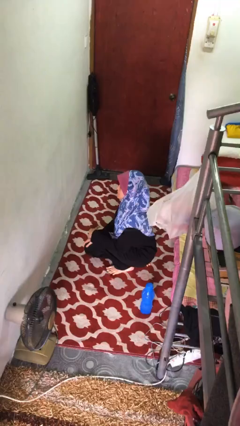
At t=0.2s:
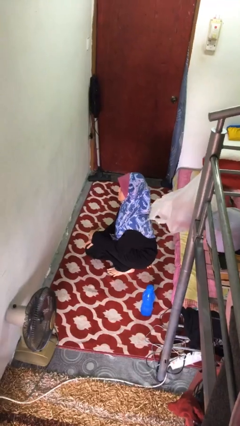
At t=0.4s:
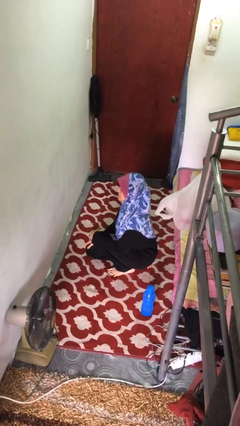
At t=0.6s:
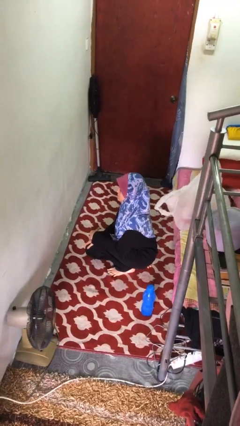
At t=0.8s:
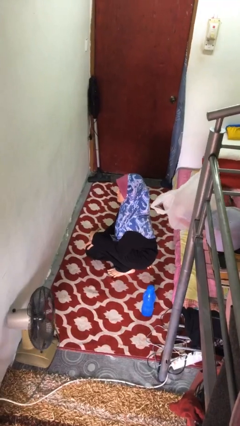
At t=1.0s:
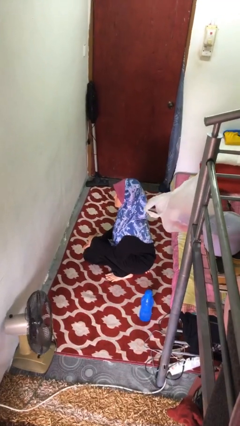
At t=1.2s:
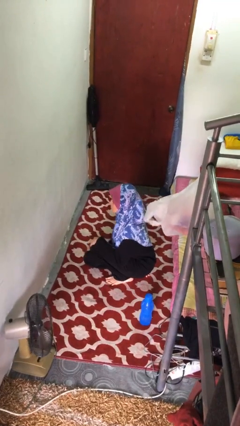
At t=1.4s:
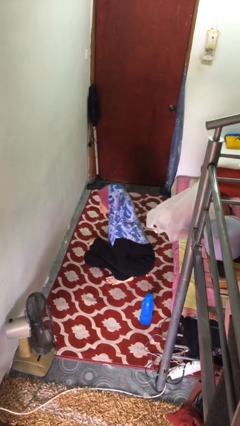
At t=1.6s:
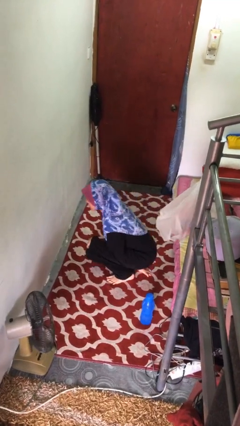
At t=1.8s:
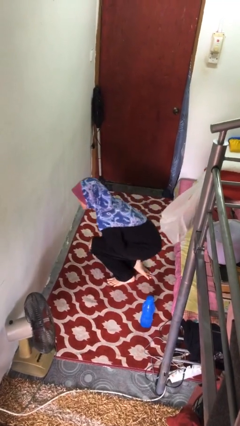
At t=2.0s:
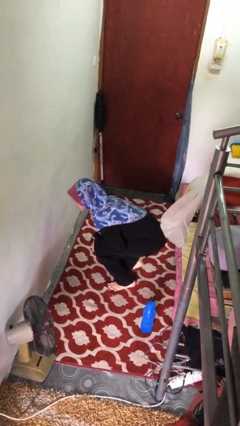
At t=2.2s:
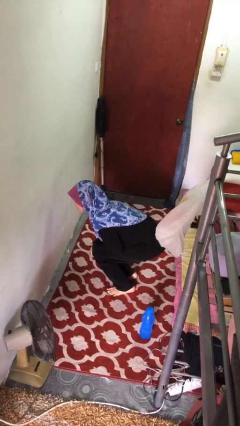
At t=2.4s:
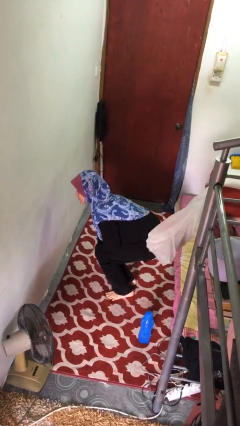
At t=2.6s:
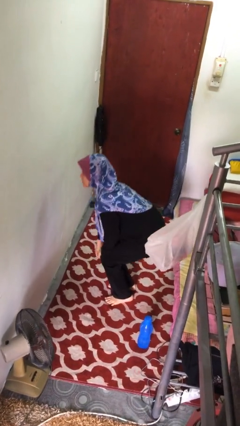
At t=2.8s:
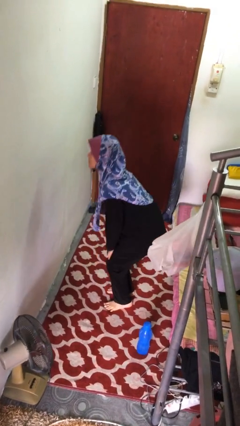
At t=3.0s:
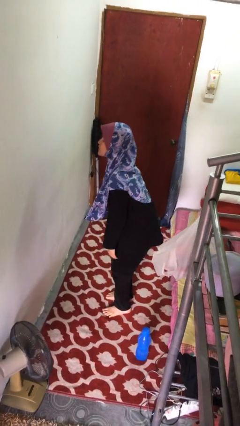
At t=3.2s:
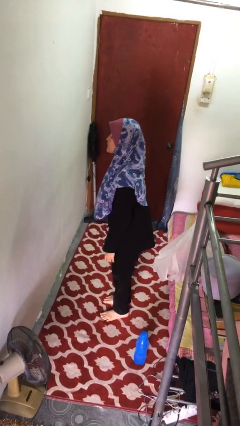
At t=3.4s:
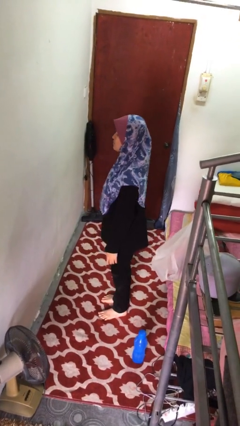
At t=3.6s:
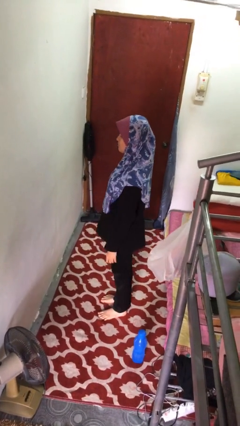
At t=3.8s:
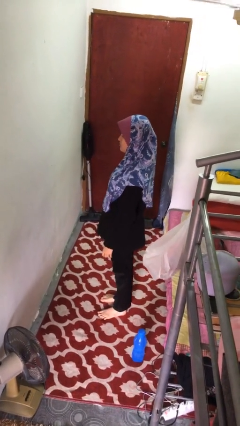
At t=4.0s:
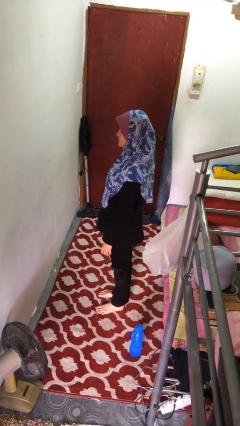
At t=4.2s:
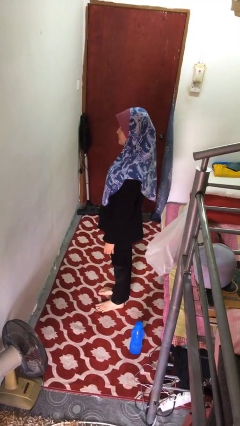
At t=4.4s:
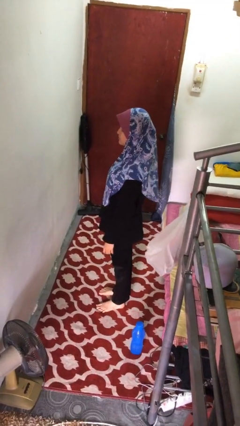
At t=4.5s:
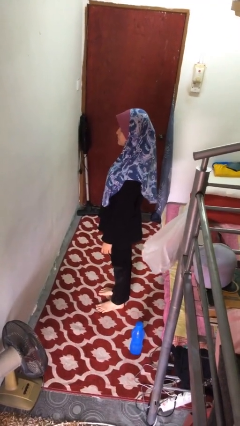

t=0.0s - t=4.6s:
person stands up from floor

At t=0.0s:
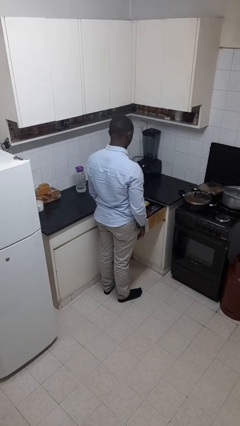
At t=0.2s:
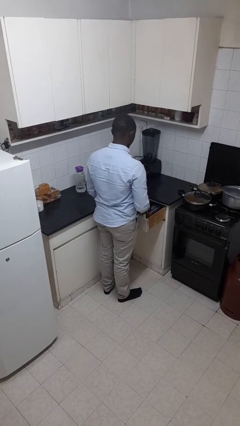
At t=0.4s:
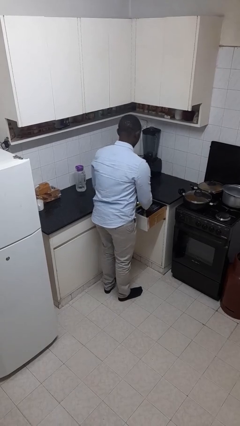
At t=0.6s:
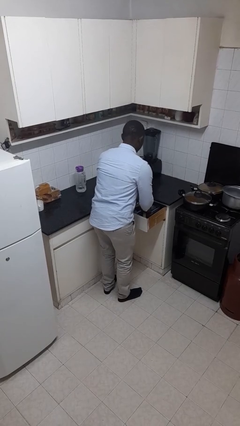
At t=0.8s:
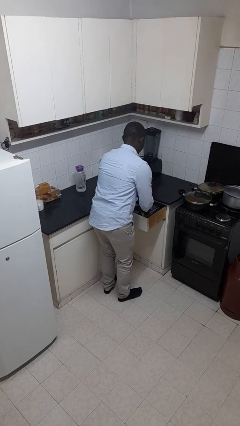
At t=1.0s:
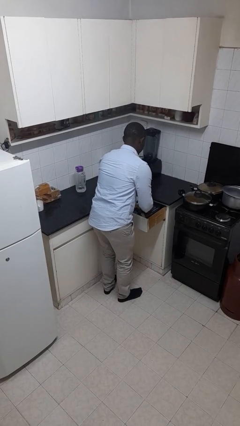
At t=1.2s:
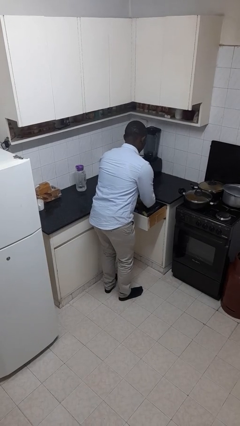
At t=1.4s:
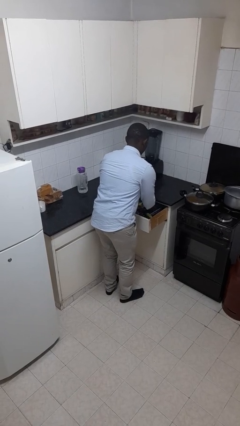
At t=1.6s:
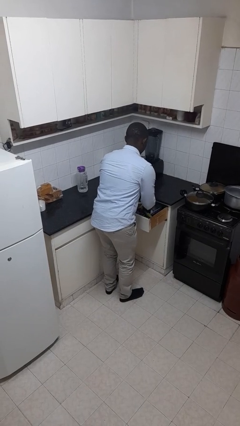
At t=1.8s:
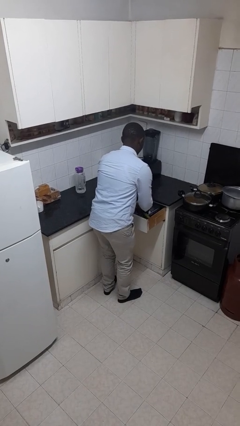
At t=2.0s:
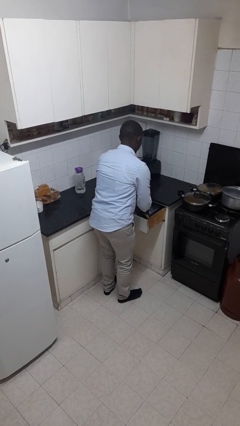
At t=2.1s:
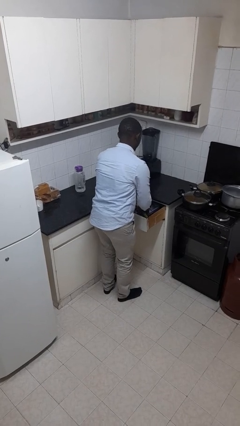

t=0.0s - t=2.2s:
person searches in kitchen drawer

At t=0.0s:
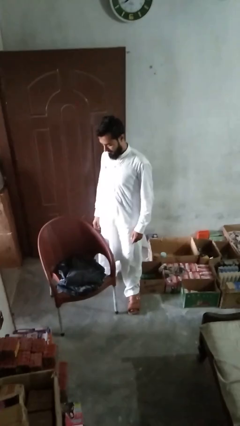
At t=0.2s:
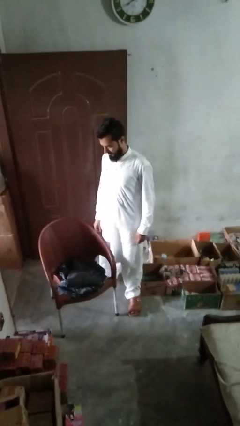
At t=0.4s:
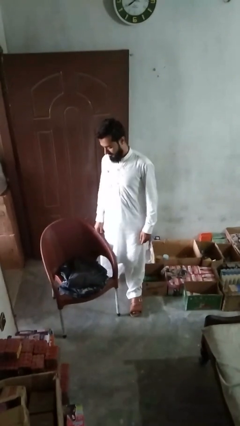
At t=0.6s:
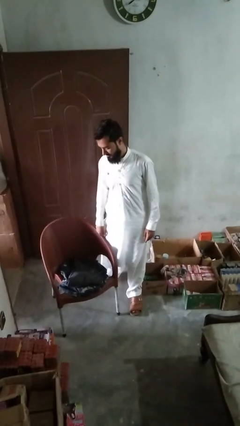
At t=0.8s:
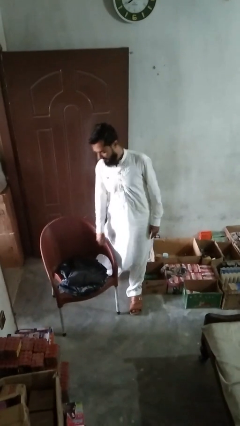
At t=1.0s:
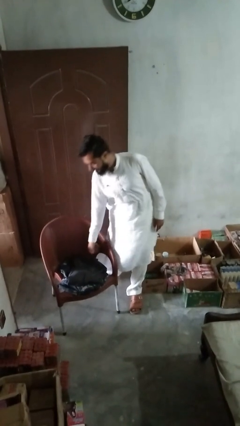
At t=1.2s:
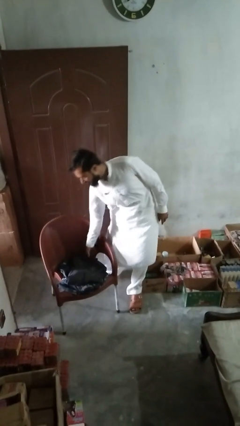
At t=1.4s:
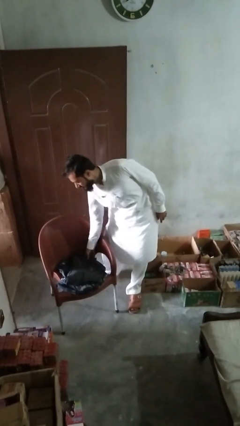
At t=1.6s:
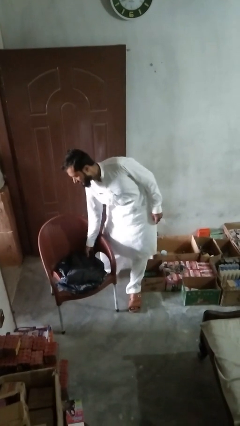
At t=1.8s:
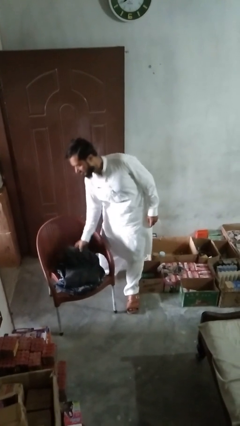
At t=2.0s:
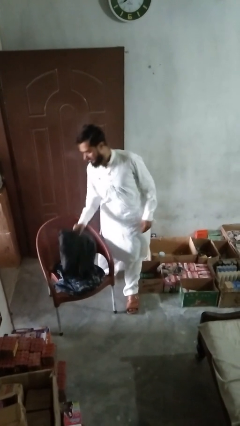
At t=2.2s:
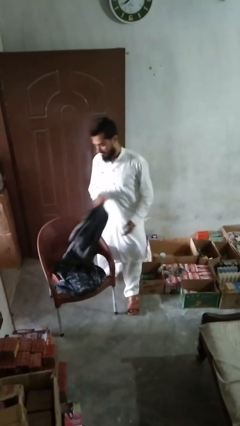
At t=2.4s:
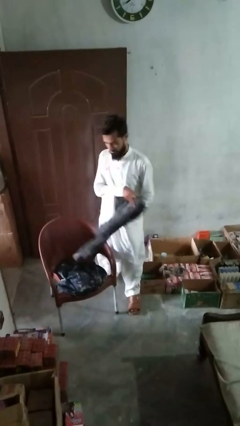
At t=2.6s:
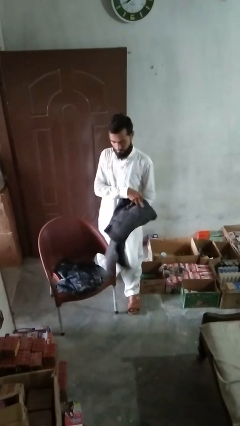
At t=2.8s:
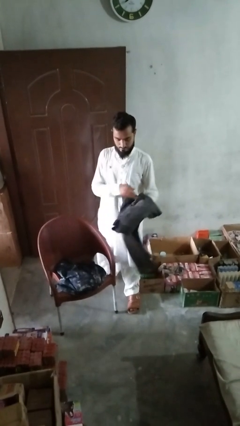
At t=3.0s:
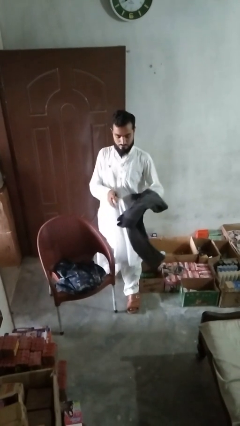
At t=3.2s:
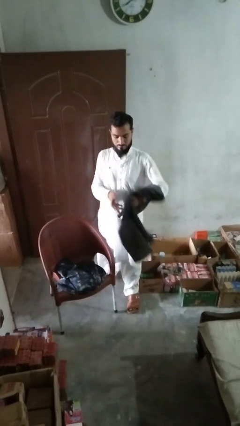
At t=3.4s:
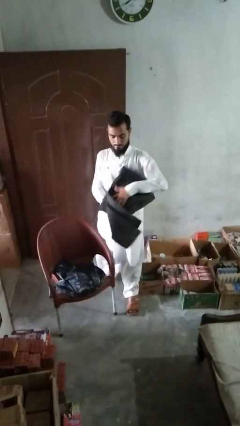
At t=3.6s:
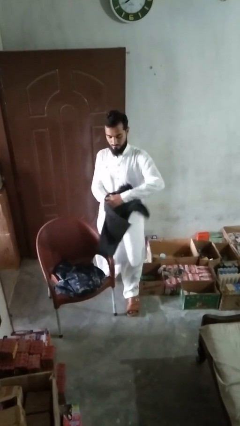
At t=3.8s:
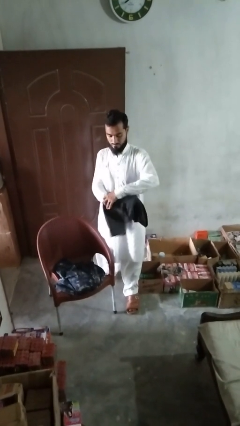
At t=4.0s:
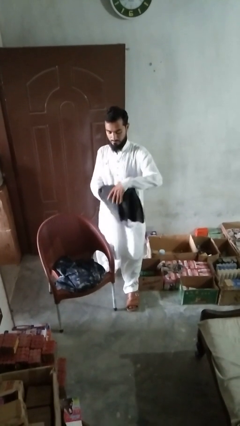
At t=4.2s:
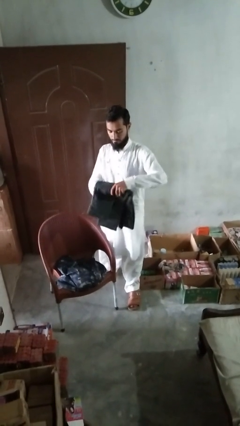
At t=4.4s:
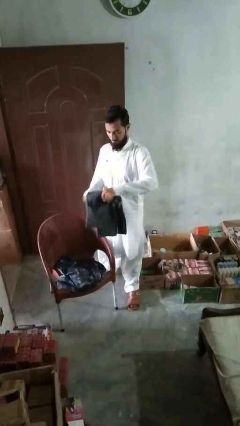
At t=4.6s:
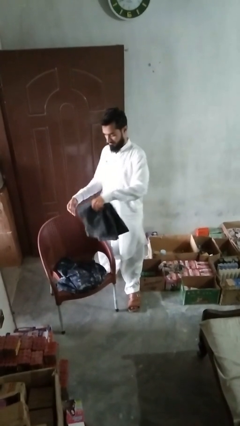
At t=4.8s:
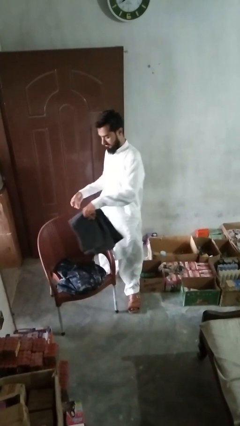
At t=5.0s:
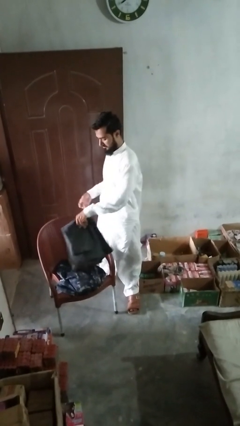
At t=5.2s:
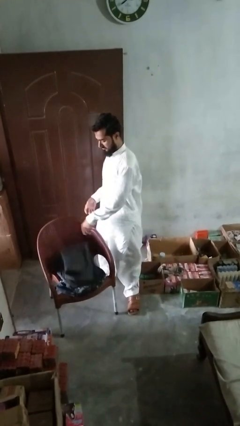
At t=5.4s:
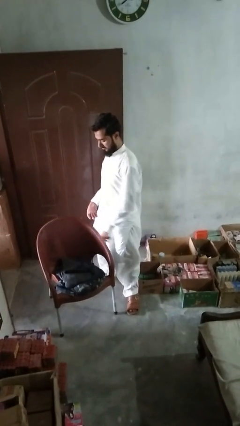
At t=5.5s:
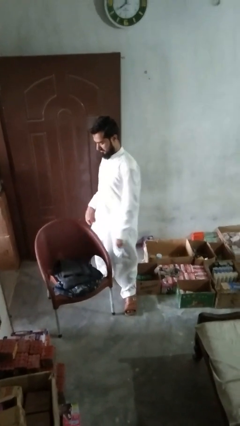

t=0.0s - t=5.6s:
person folds pants

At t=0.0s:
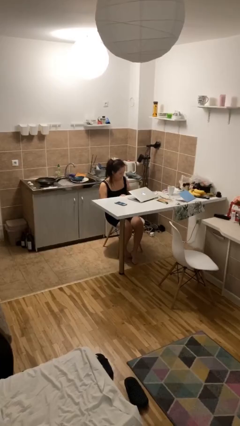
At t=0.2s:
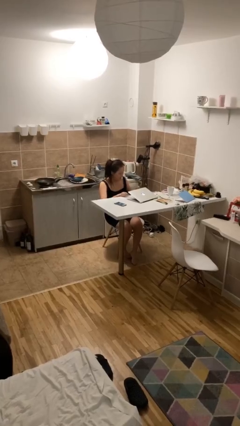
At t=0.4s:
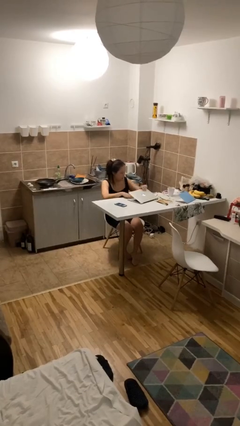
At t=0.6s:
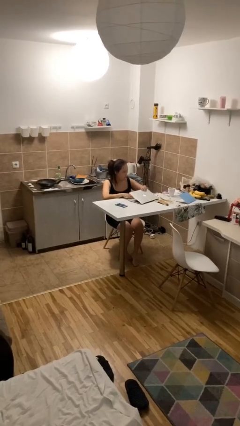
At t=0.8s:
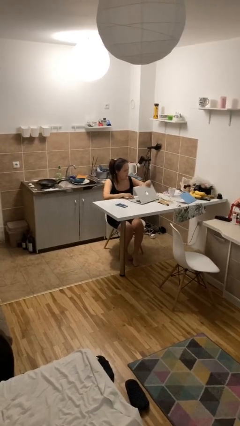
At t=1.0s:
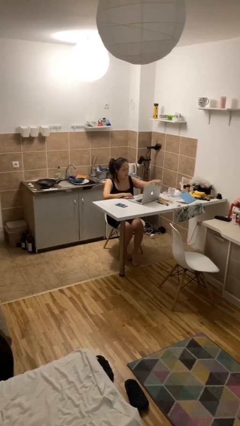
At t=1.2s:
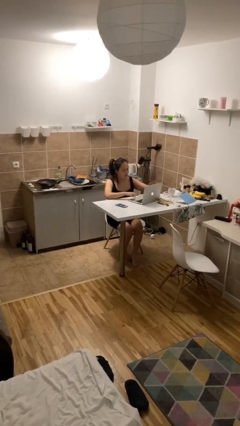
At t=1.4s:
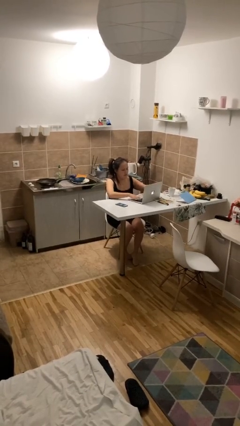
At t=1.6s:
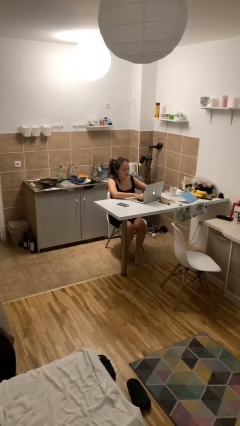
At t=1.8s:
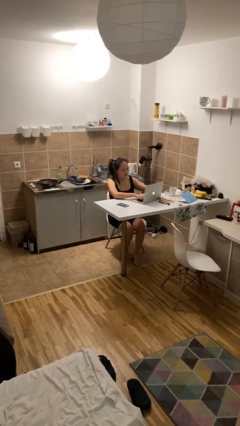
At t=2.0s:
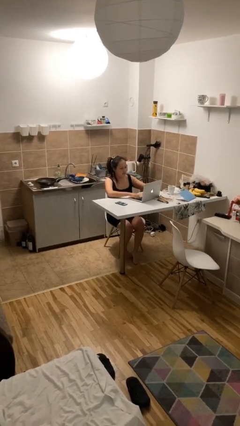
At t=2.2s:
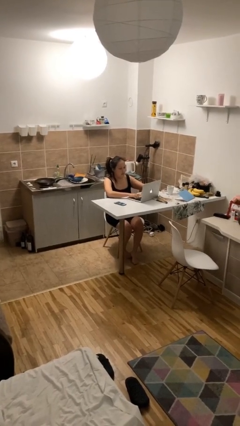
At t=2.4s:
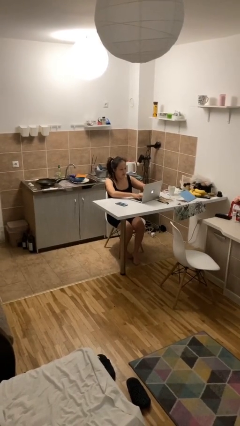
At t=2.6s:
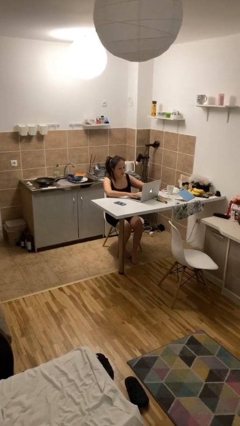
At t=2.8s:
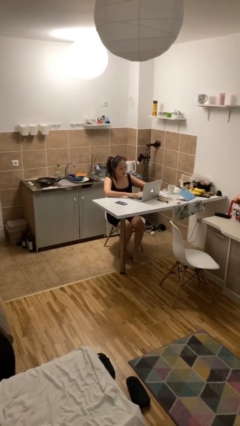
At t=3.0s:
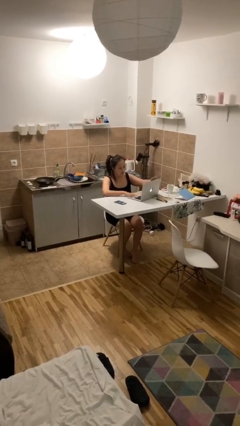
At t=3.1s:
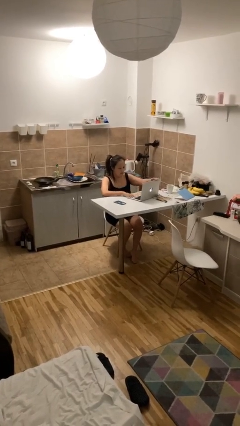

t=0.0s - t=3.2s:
person interacts with laptop

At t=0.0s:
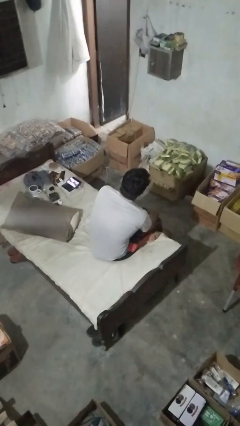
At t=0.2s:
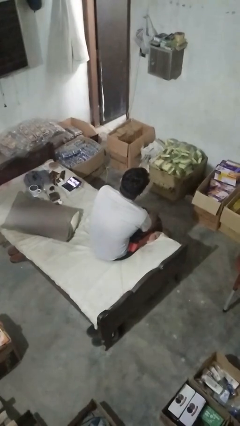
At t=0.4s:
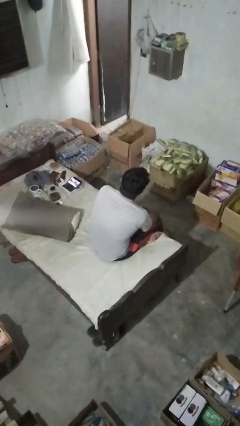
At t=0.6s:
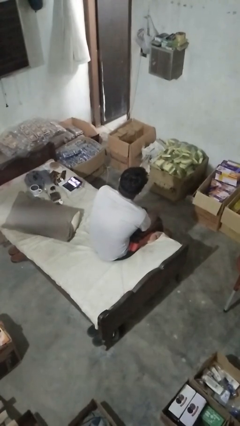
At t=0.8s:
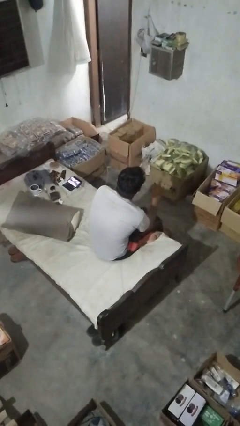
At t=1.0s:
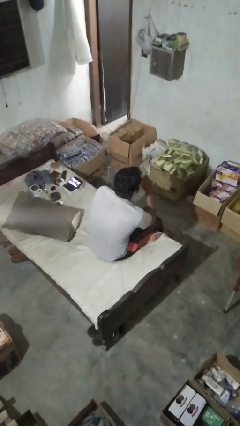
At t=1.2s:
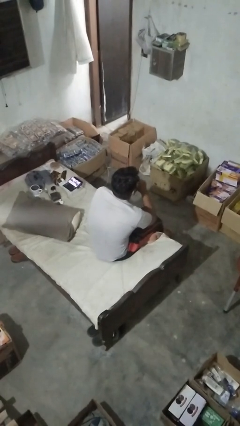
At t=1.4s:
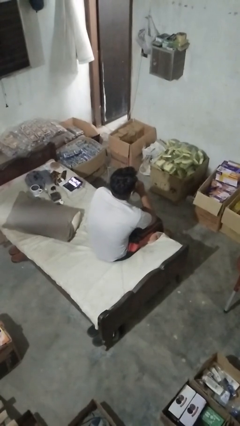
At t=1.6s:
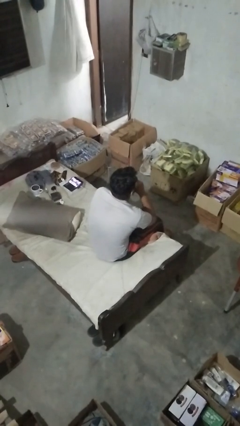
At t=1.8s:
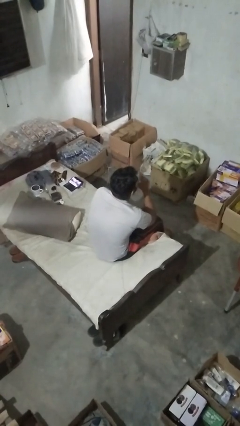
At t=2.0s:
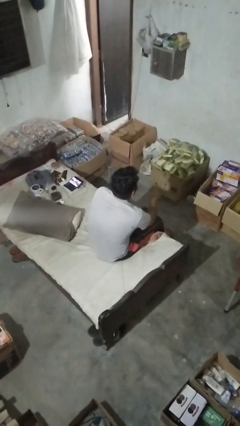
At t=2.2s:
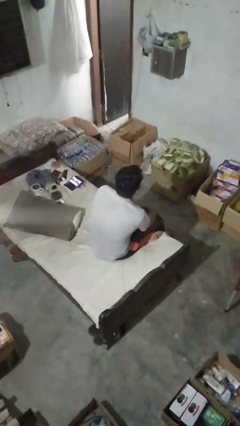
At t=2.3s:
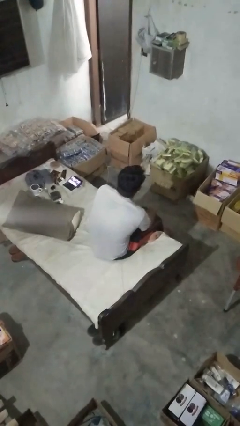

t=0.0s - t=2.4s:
person gestures be quiet
